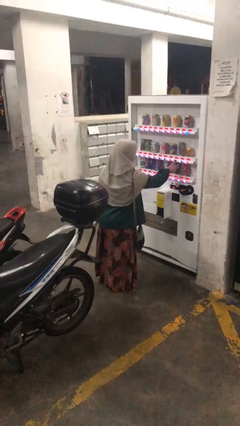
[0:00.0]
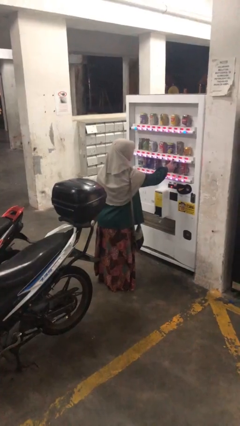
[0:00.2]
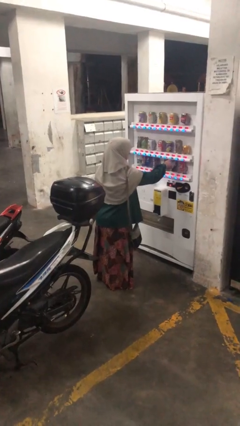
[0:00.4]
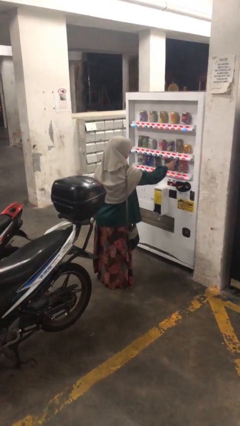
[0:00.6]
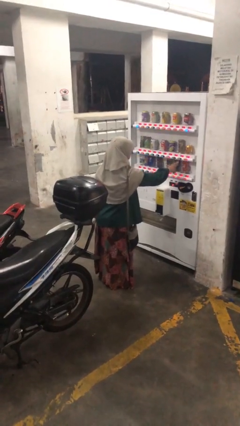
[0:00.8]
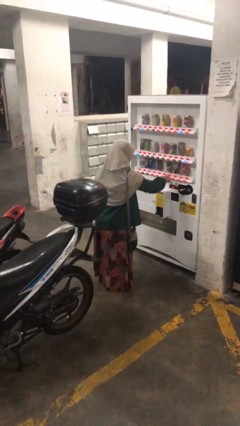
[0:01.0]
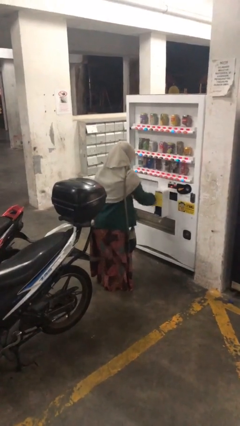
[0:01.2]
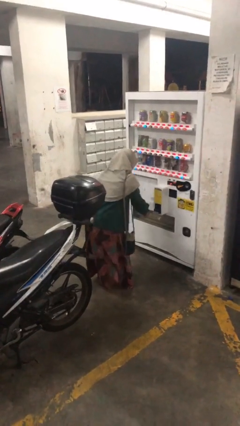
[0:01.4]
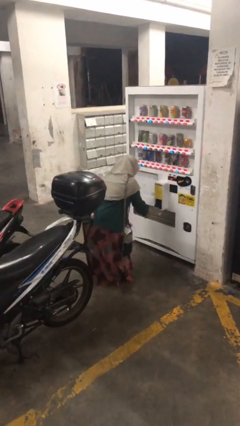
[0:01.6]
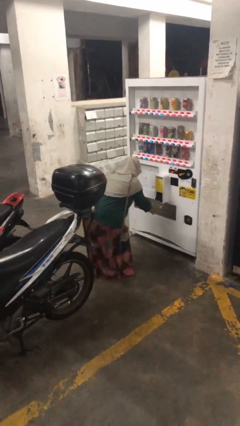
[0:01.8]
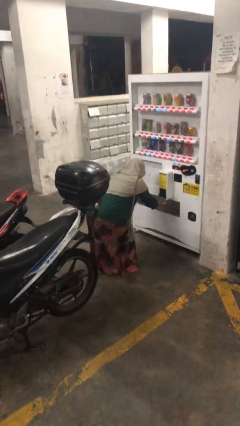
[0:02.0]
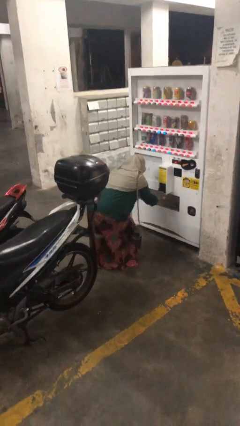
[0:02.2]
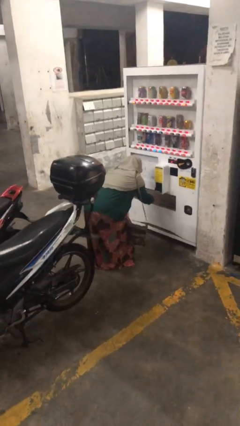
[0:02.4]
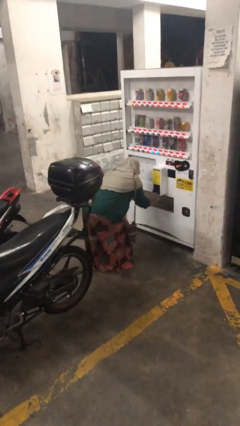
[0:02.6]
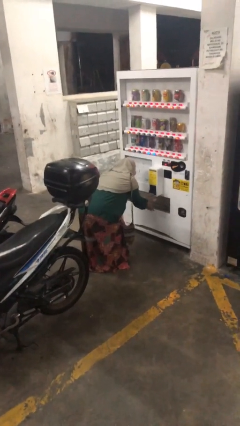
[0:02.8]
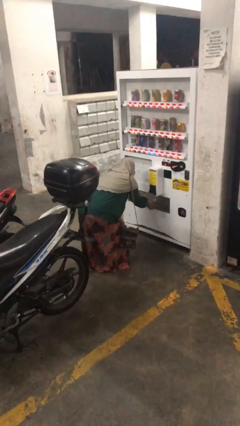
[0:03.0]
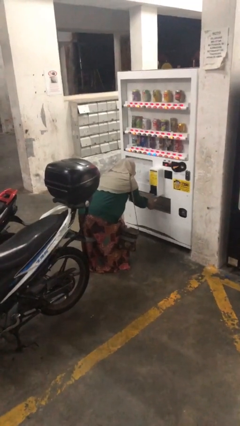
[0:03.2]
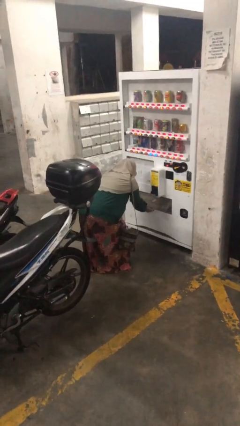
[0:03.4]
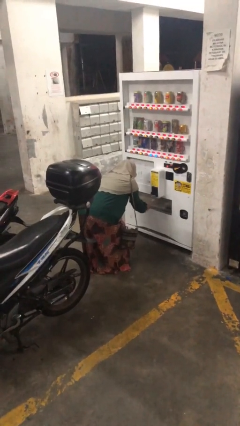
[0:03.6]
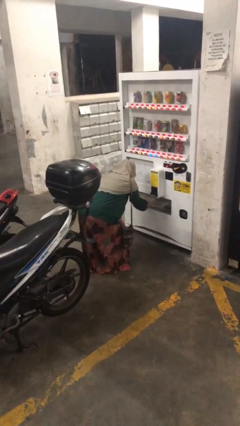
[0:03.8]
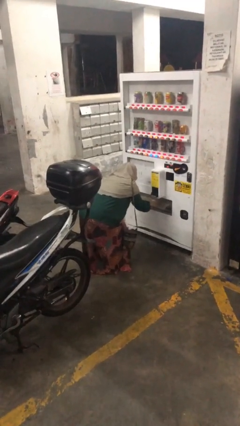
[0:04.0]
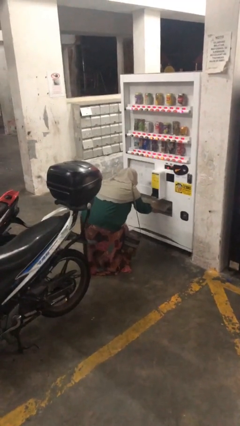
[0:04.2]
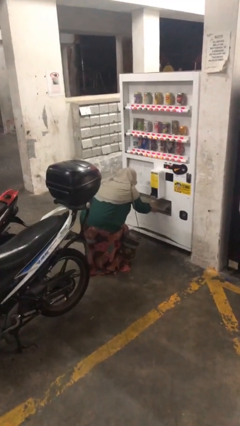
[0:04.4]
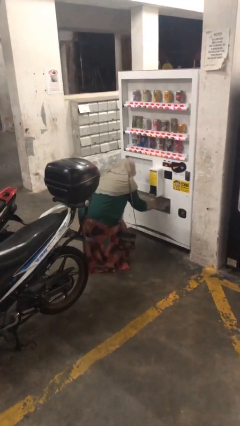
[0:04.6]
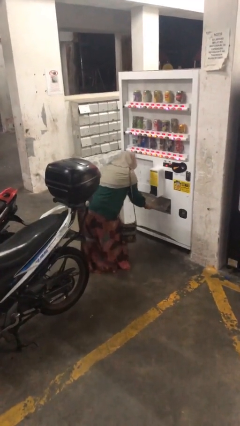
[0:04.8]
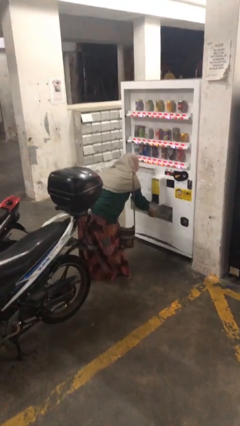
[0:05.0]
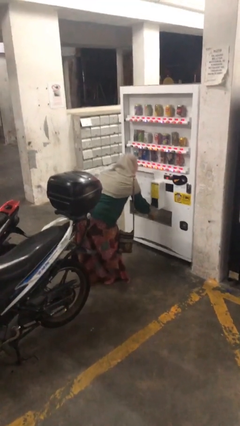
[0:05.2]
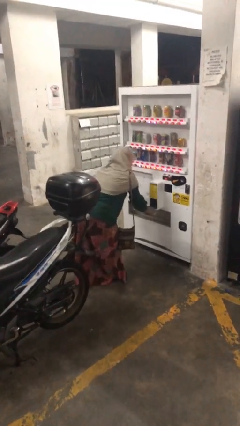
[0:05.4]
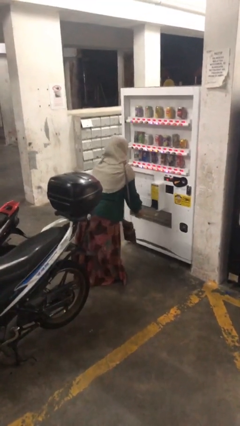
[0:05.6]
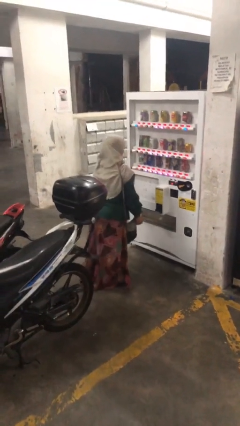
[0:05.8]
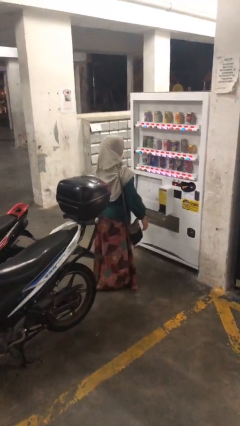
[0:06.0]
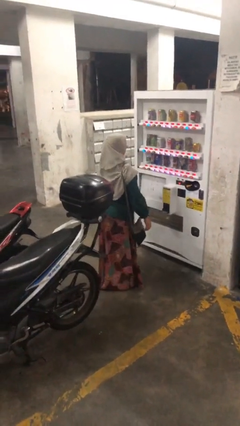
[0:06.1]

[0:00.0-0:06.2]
person purchases from machine

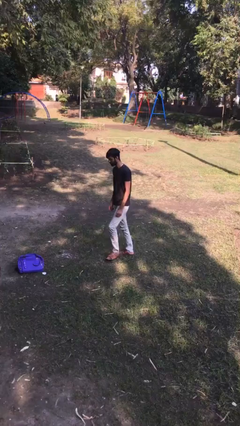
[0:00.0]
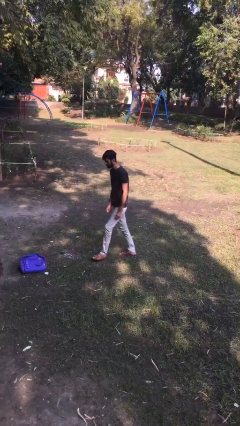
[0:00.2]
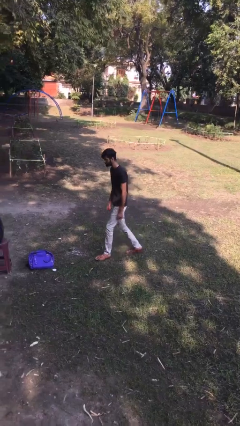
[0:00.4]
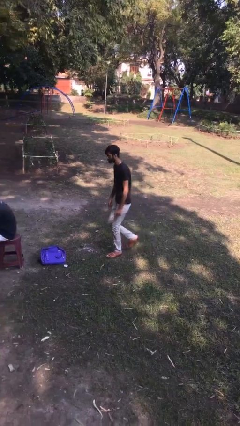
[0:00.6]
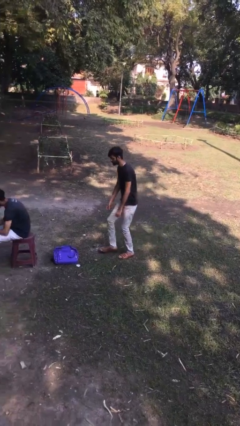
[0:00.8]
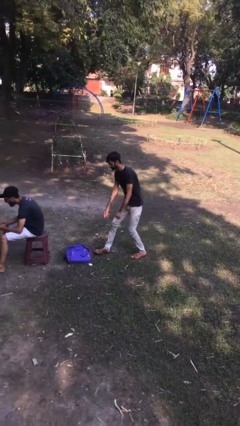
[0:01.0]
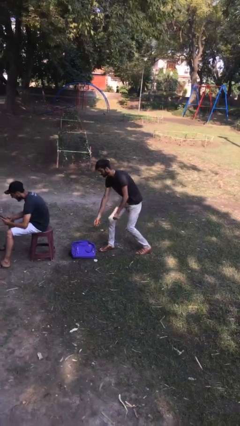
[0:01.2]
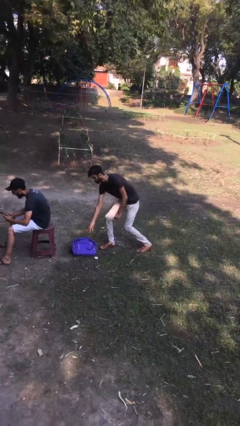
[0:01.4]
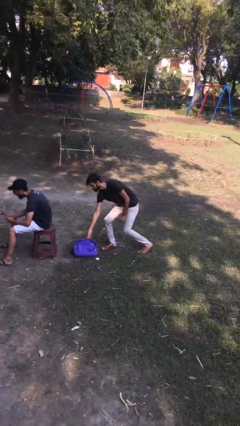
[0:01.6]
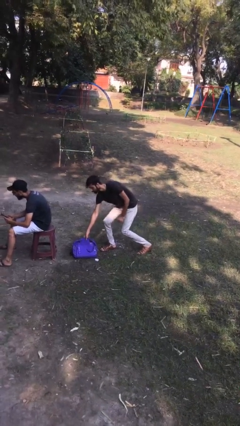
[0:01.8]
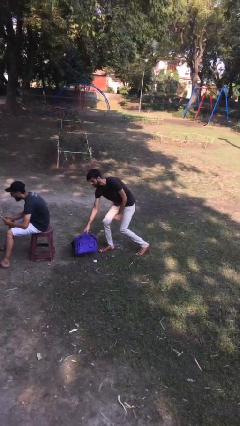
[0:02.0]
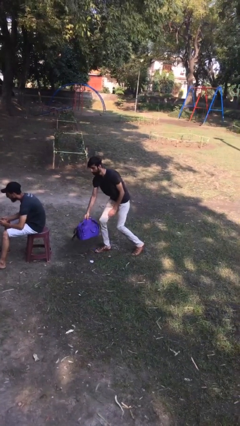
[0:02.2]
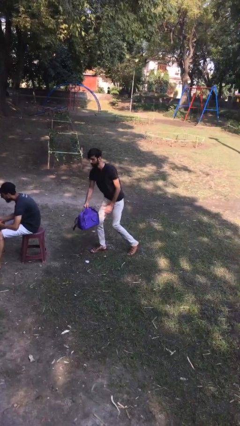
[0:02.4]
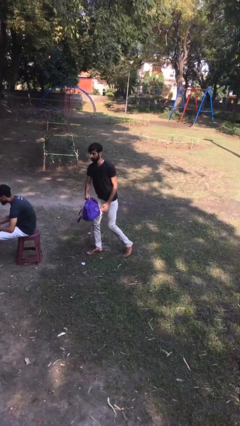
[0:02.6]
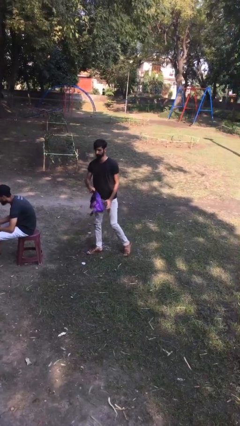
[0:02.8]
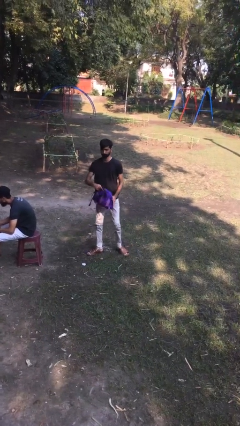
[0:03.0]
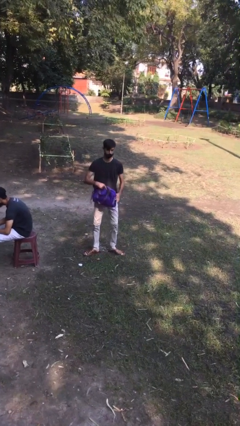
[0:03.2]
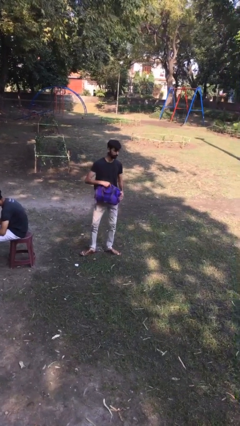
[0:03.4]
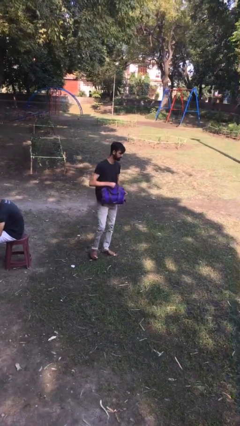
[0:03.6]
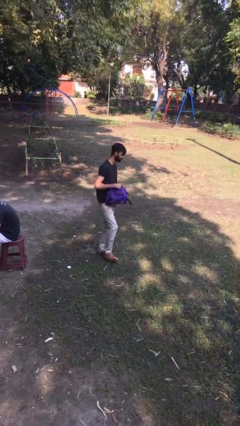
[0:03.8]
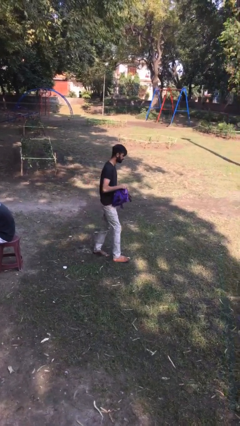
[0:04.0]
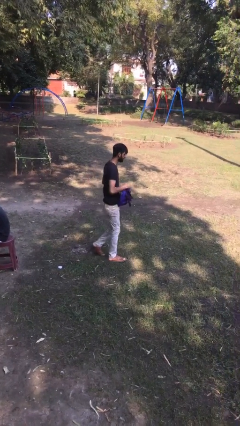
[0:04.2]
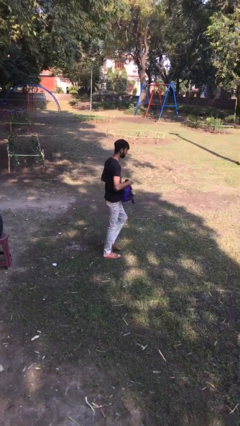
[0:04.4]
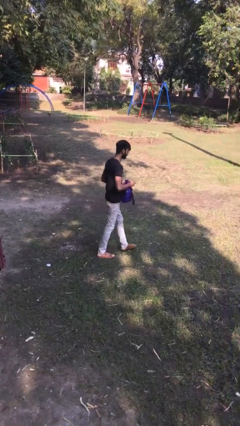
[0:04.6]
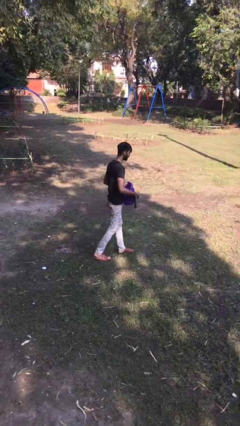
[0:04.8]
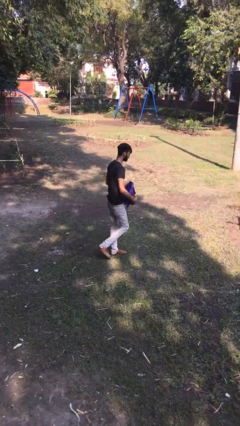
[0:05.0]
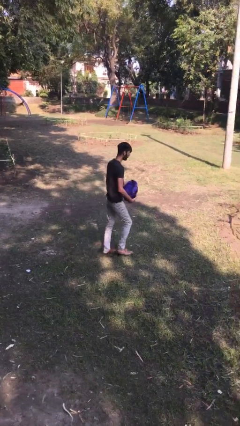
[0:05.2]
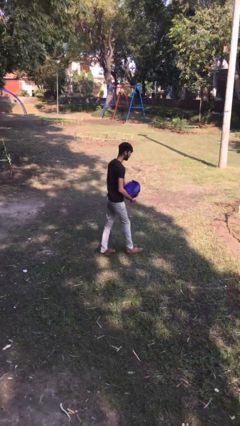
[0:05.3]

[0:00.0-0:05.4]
person steals object from person

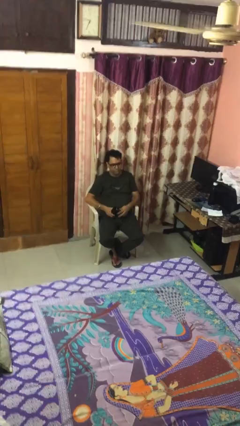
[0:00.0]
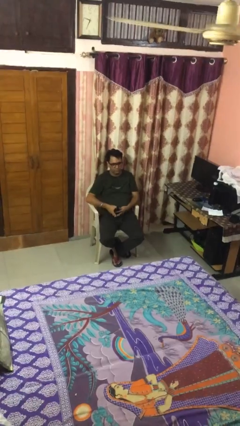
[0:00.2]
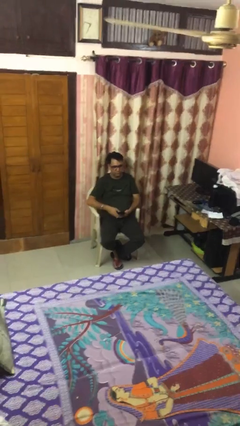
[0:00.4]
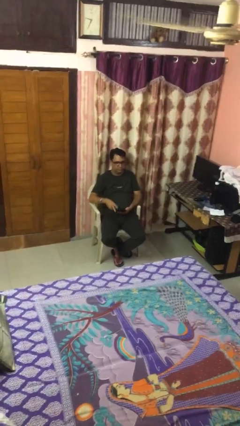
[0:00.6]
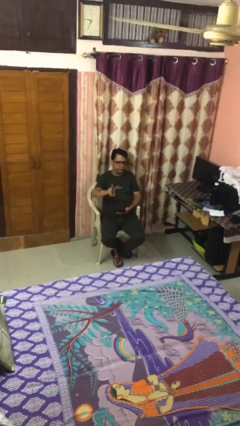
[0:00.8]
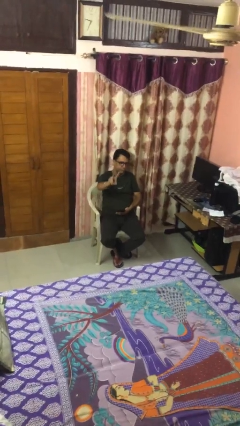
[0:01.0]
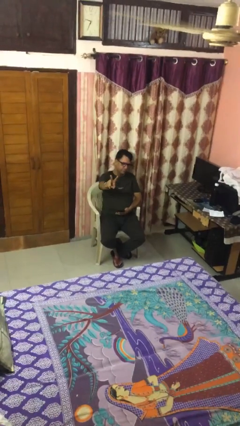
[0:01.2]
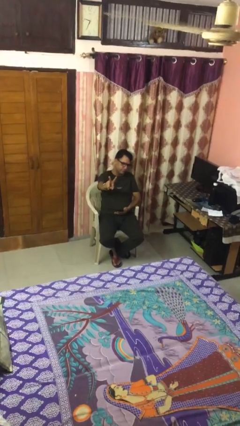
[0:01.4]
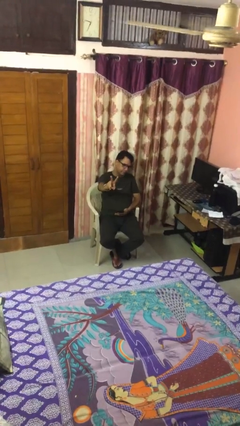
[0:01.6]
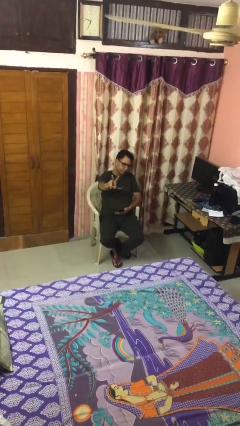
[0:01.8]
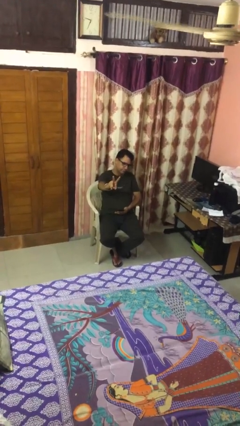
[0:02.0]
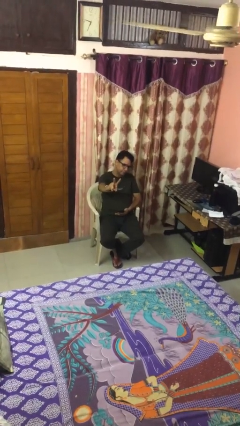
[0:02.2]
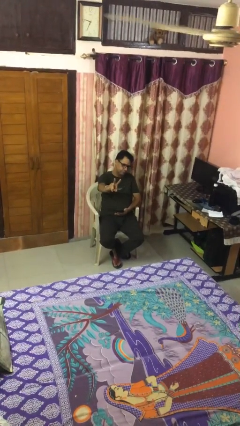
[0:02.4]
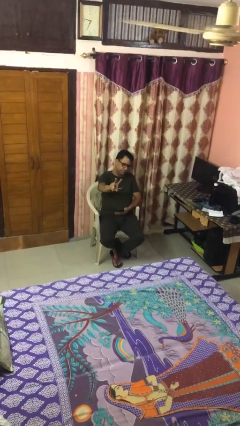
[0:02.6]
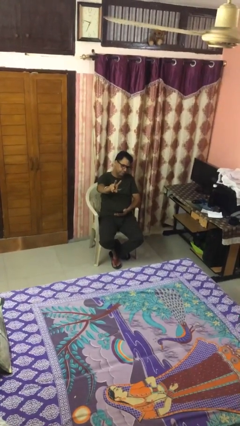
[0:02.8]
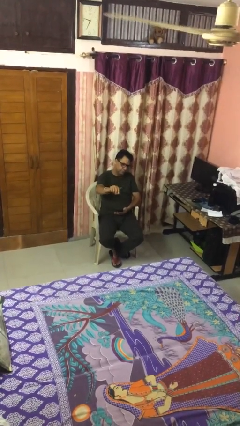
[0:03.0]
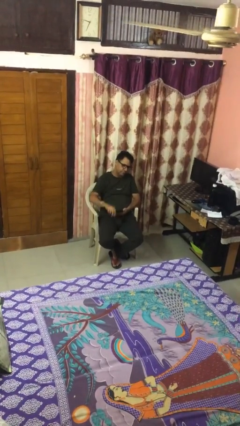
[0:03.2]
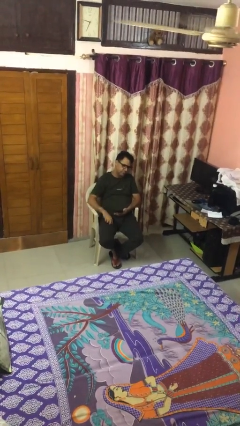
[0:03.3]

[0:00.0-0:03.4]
person gestures peace

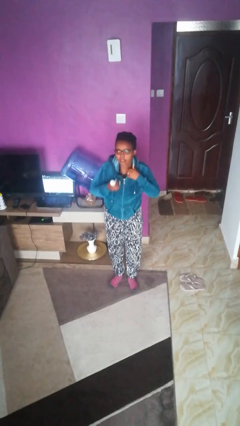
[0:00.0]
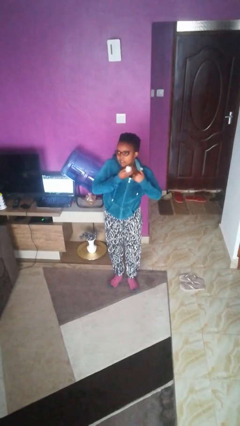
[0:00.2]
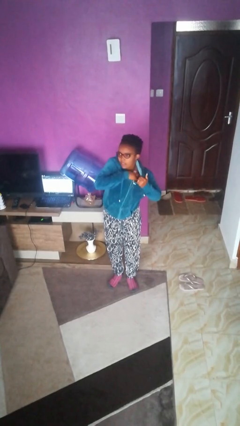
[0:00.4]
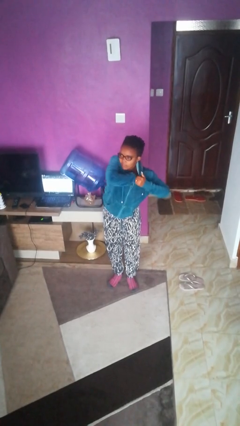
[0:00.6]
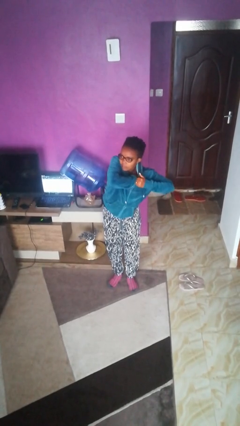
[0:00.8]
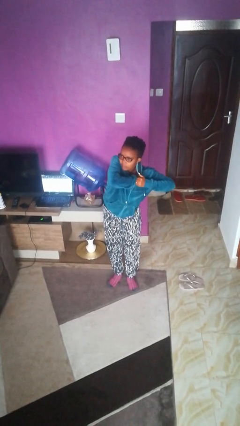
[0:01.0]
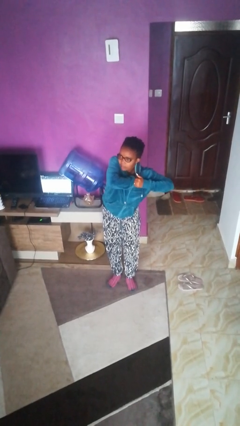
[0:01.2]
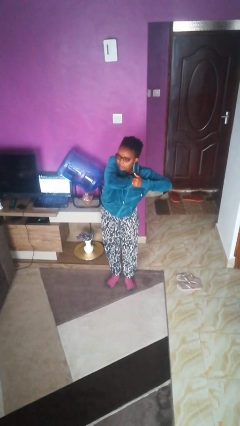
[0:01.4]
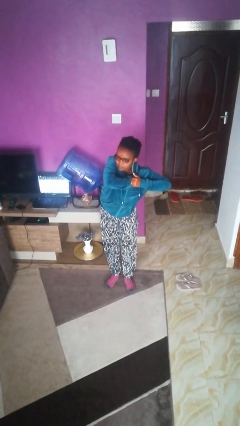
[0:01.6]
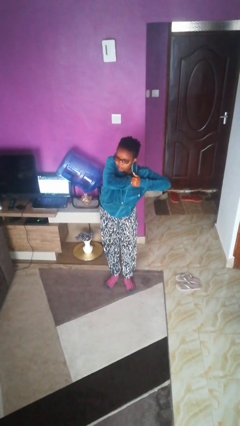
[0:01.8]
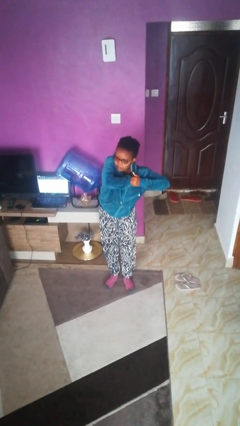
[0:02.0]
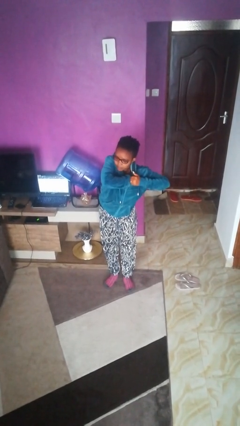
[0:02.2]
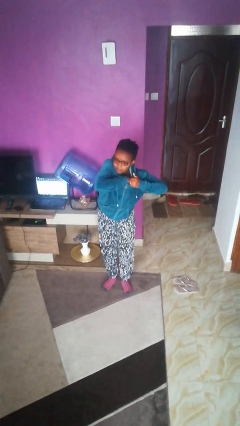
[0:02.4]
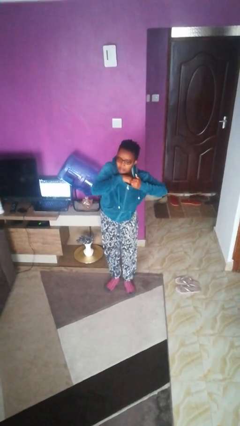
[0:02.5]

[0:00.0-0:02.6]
person applies deodorant
